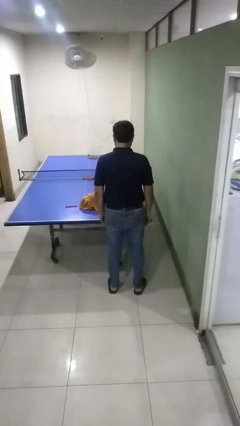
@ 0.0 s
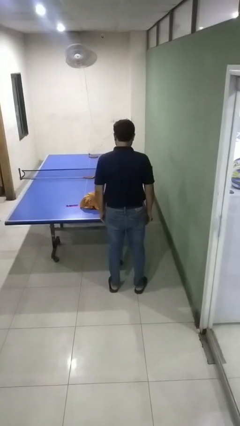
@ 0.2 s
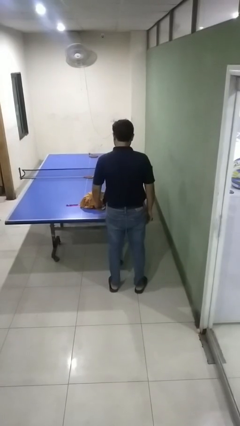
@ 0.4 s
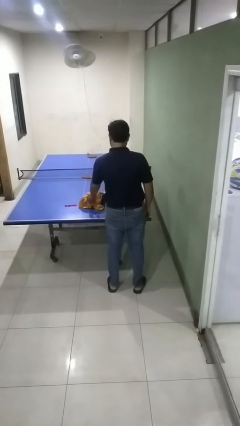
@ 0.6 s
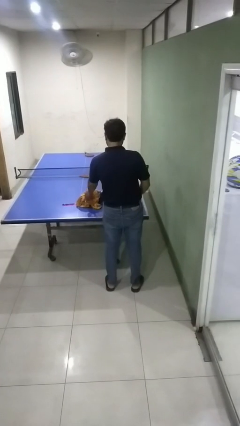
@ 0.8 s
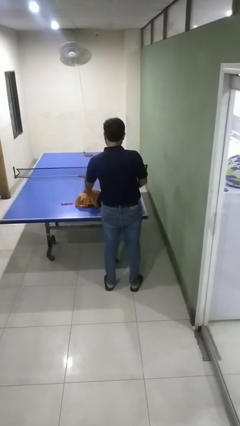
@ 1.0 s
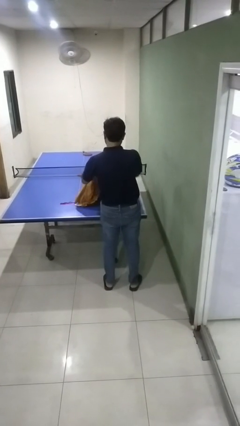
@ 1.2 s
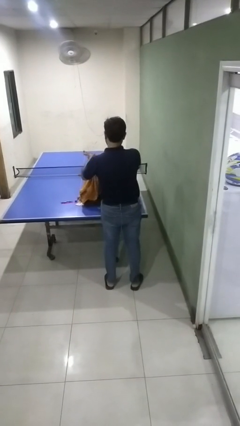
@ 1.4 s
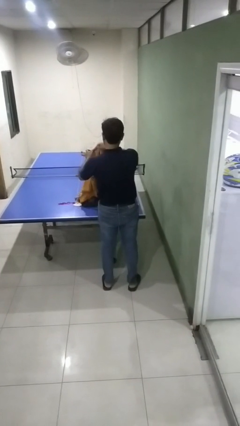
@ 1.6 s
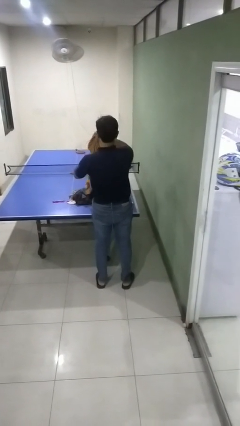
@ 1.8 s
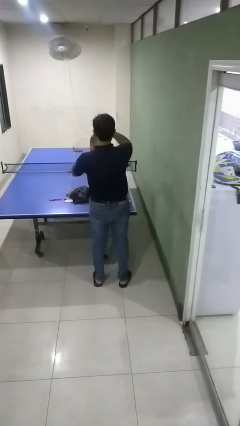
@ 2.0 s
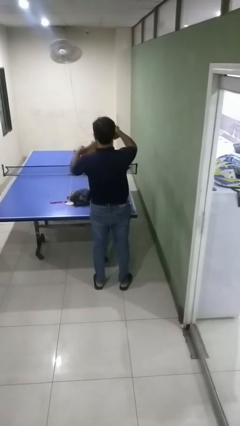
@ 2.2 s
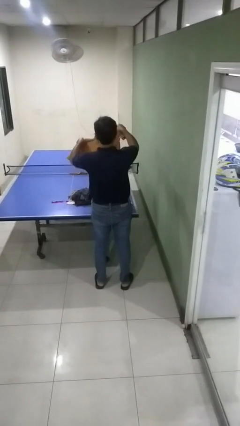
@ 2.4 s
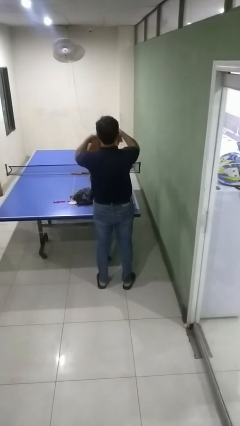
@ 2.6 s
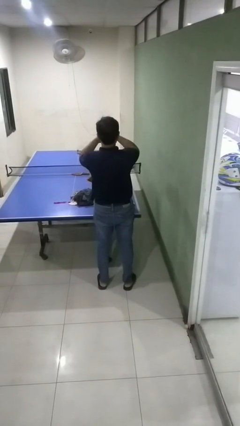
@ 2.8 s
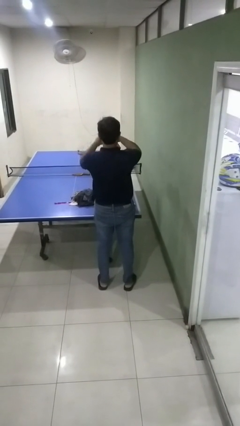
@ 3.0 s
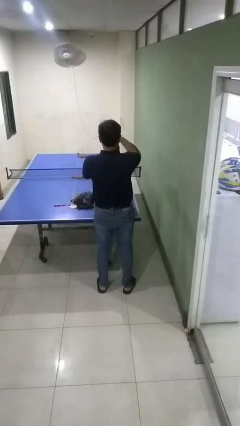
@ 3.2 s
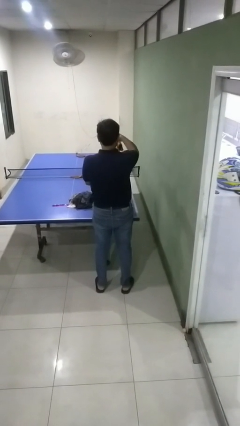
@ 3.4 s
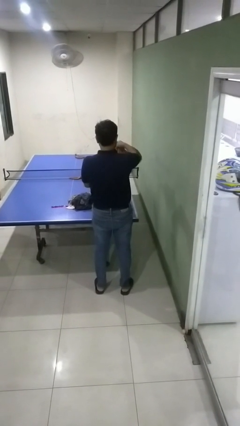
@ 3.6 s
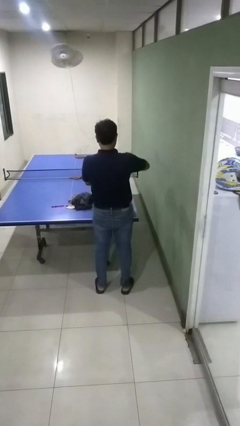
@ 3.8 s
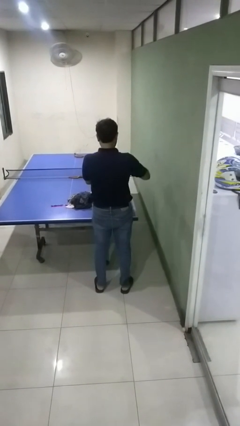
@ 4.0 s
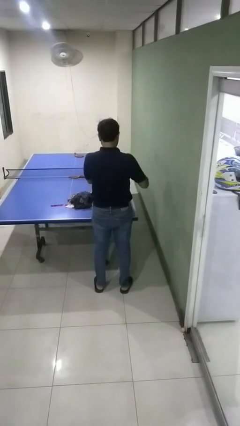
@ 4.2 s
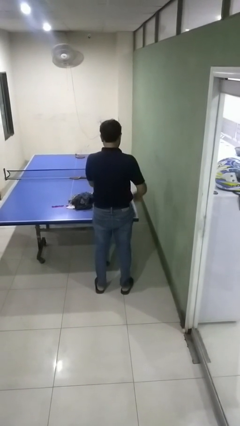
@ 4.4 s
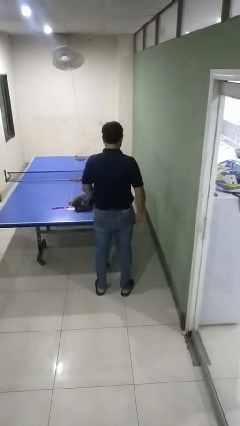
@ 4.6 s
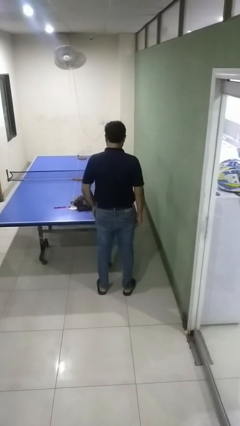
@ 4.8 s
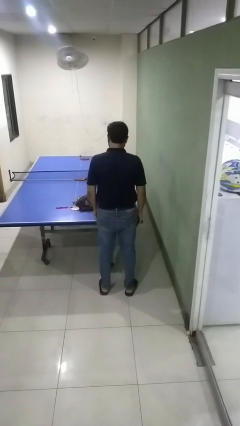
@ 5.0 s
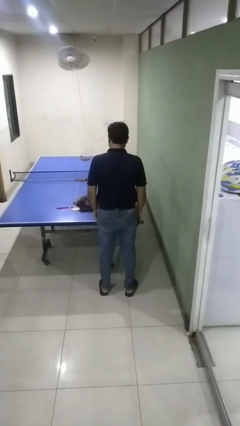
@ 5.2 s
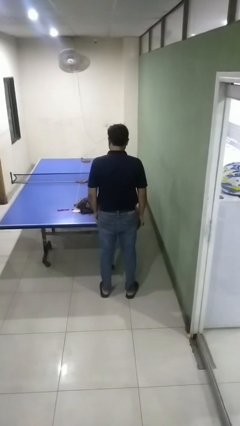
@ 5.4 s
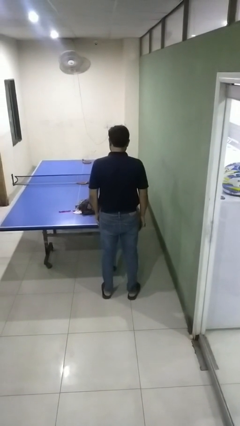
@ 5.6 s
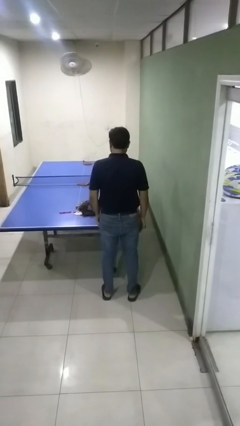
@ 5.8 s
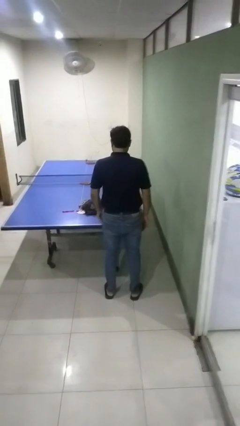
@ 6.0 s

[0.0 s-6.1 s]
person folds shirt

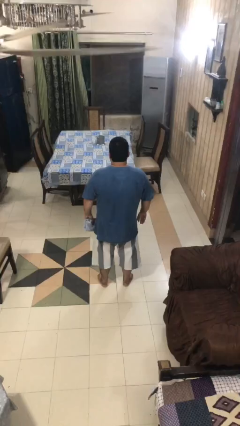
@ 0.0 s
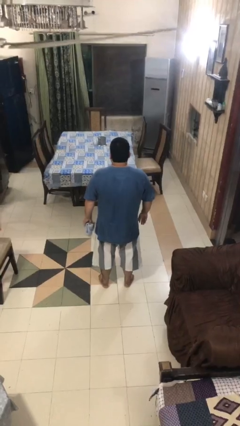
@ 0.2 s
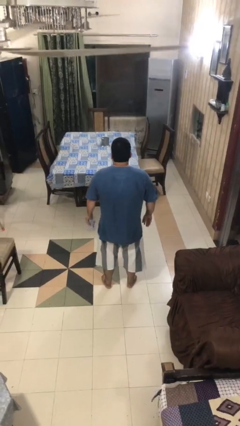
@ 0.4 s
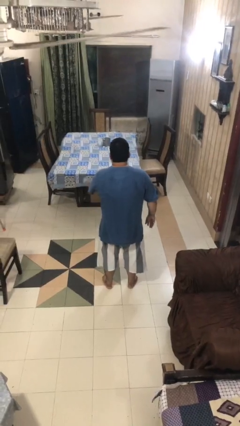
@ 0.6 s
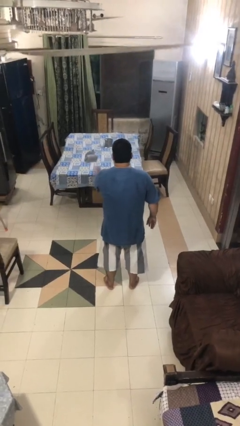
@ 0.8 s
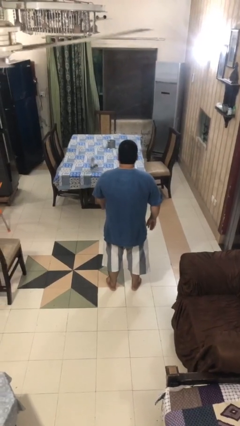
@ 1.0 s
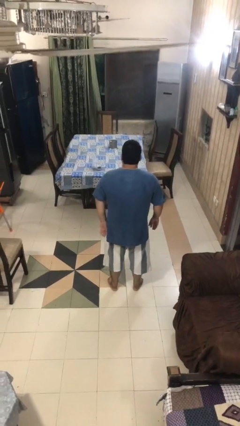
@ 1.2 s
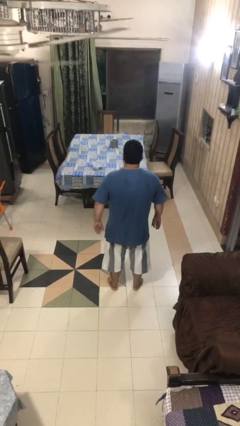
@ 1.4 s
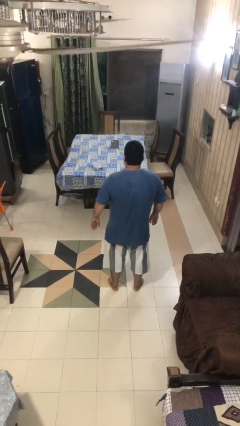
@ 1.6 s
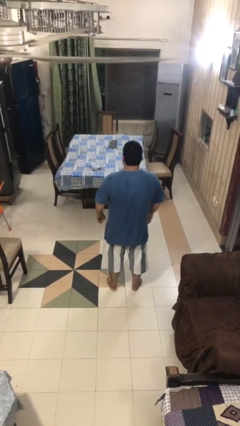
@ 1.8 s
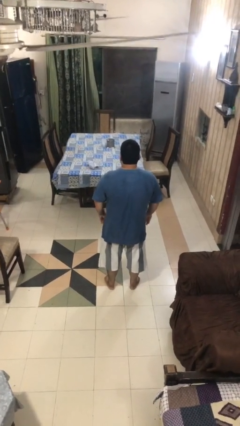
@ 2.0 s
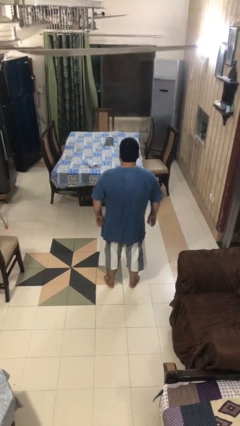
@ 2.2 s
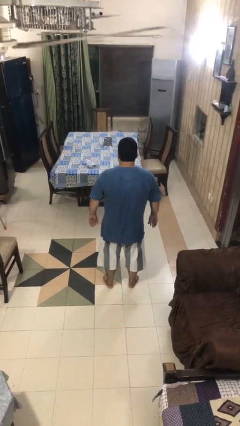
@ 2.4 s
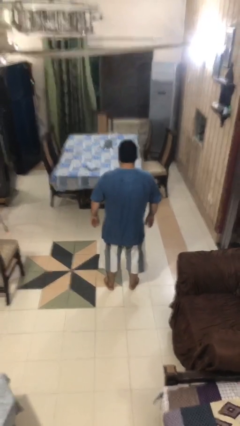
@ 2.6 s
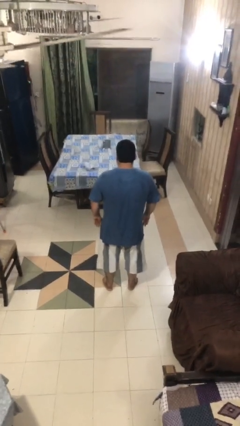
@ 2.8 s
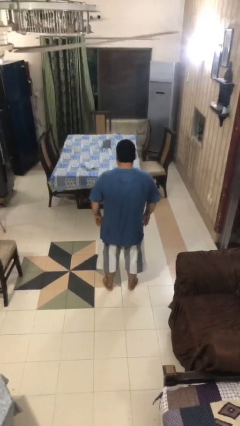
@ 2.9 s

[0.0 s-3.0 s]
person throws object on table

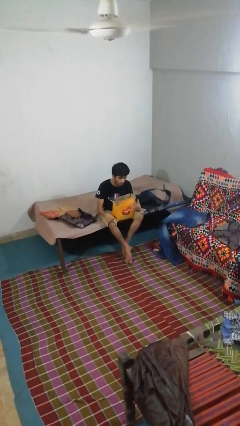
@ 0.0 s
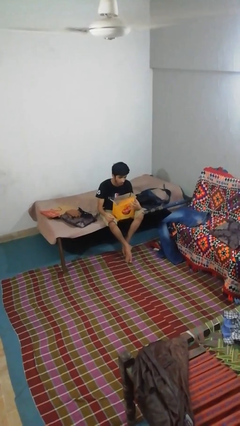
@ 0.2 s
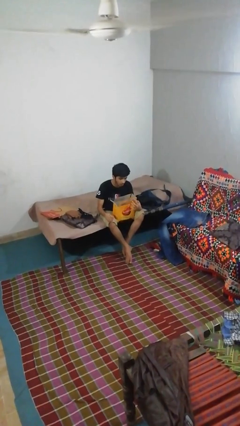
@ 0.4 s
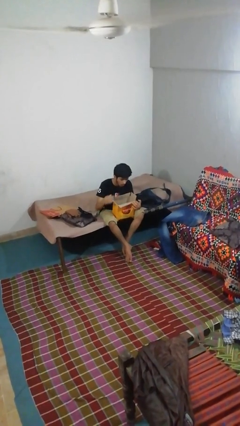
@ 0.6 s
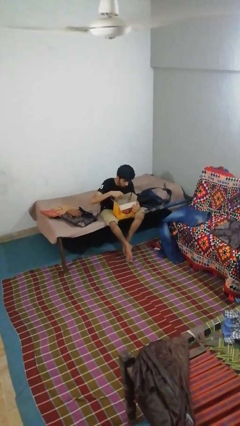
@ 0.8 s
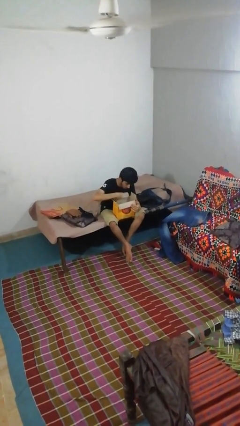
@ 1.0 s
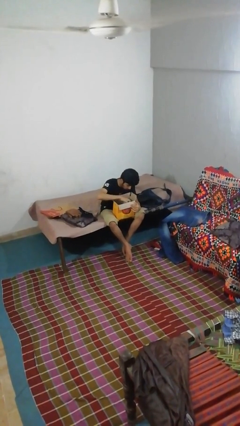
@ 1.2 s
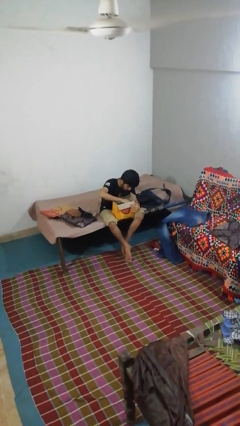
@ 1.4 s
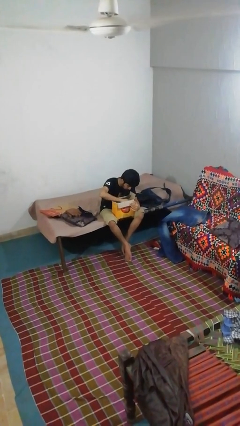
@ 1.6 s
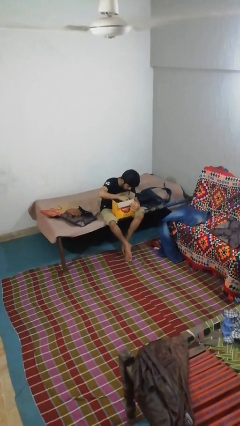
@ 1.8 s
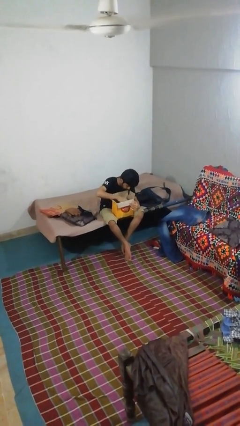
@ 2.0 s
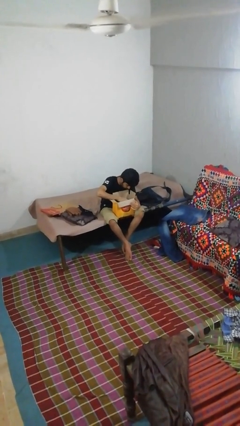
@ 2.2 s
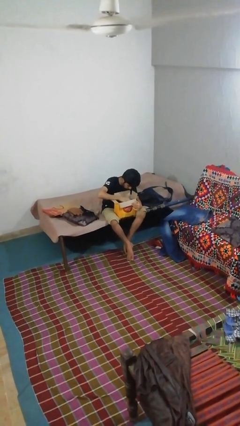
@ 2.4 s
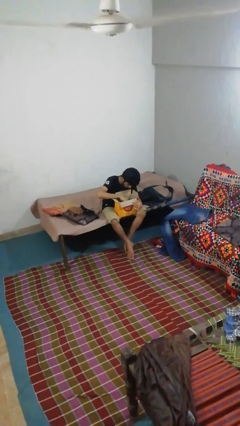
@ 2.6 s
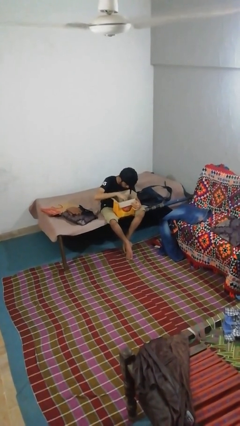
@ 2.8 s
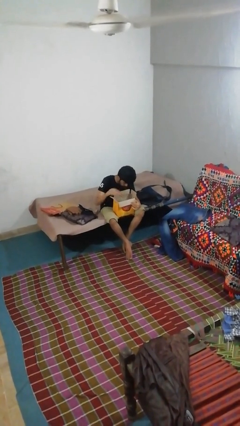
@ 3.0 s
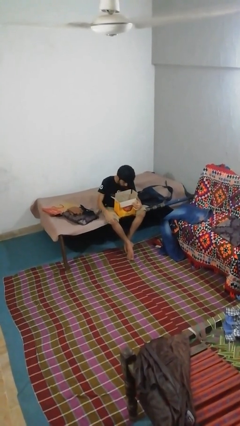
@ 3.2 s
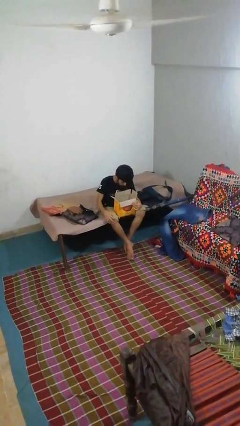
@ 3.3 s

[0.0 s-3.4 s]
person searches in box

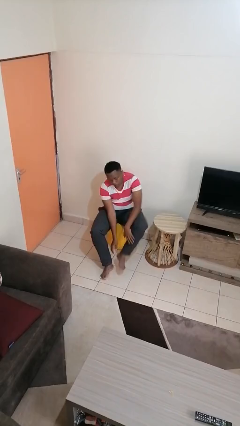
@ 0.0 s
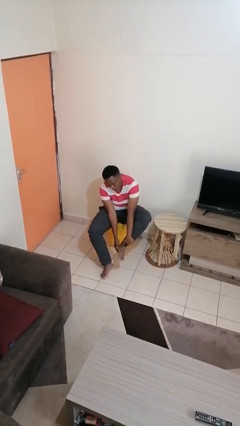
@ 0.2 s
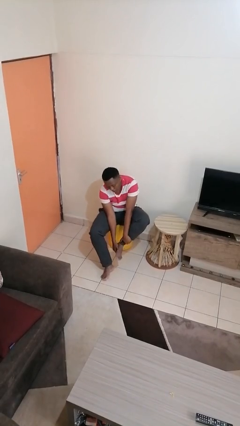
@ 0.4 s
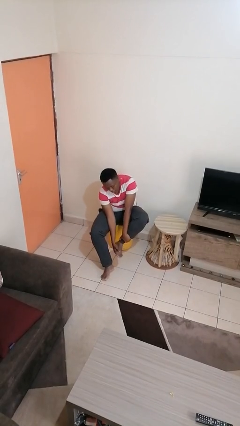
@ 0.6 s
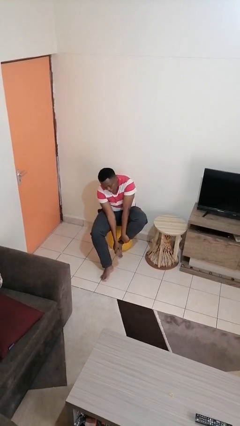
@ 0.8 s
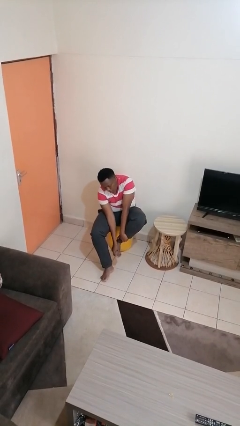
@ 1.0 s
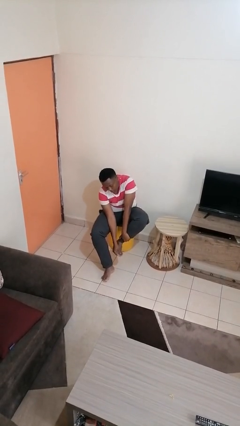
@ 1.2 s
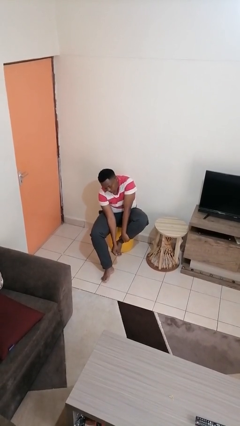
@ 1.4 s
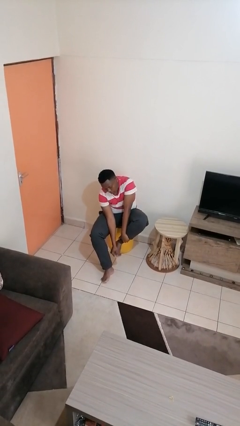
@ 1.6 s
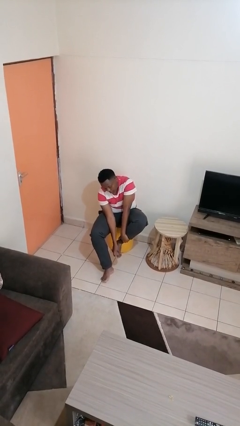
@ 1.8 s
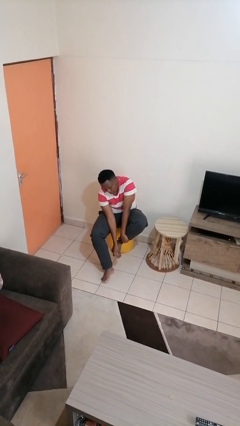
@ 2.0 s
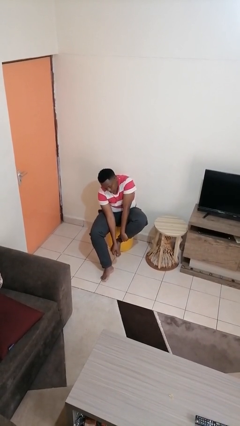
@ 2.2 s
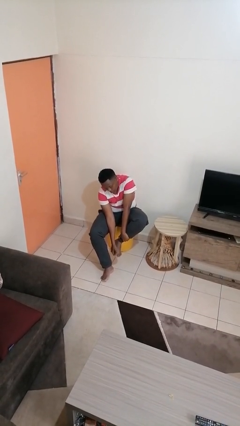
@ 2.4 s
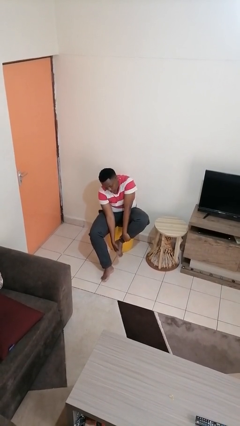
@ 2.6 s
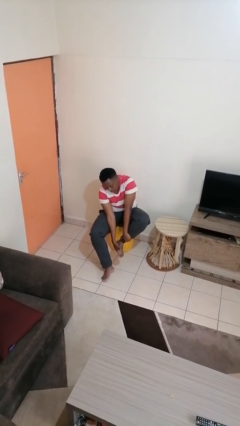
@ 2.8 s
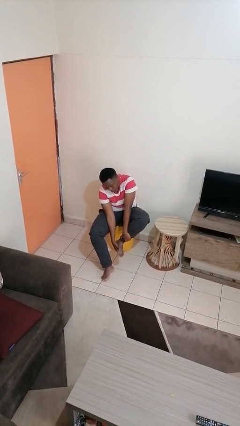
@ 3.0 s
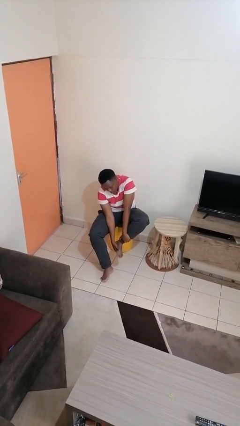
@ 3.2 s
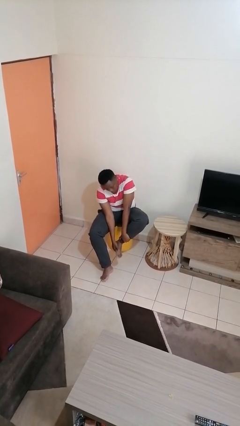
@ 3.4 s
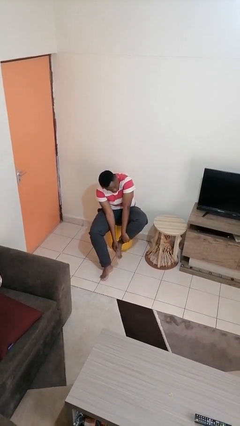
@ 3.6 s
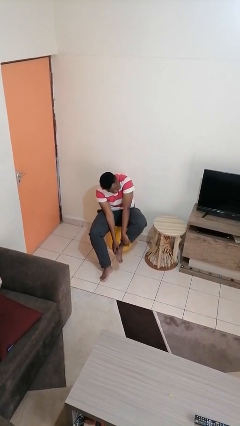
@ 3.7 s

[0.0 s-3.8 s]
person rubs foot

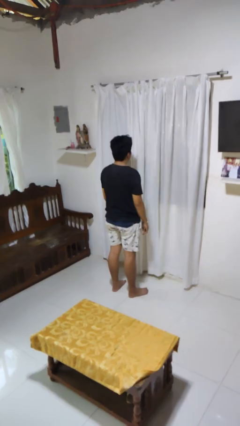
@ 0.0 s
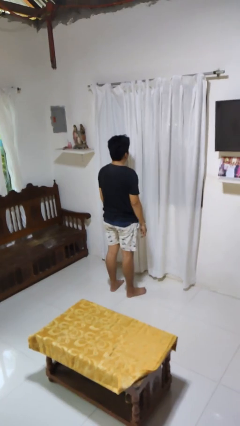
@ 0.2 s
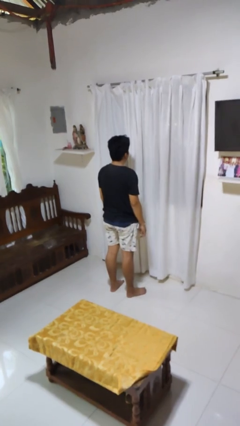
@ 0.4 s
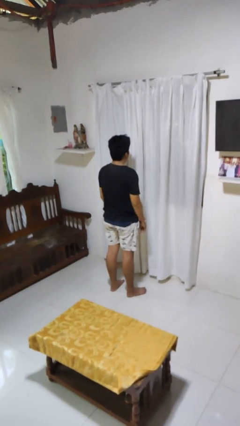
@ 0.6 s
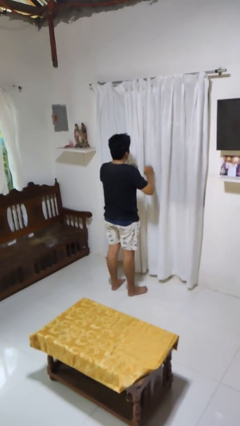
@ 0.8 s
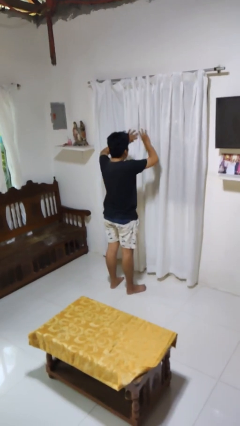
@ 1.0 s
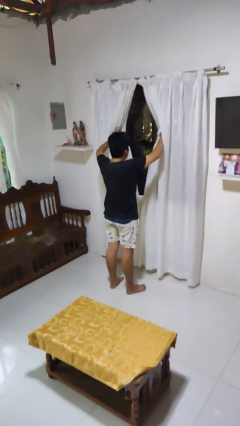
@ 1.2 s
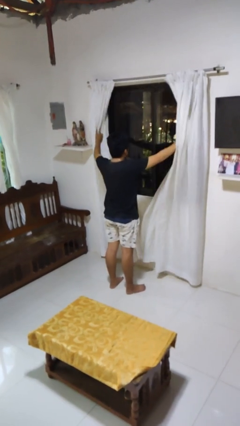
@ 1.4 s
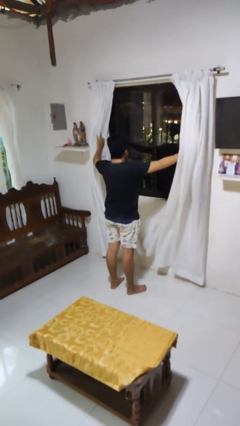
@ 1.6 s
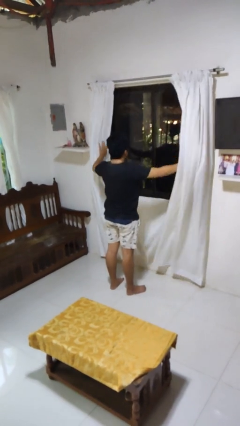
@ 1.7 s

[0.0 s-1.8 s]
person opens curtains
